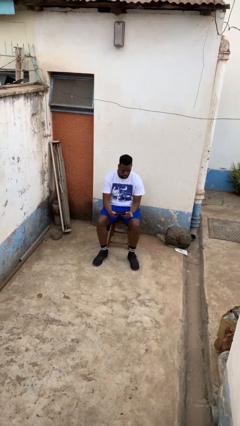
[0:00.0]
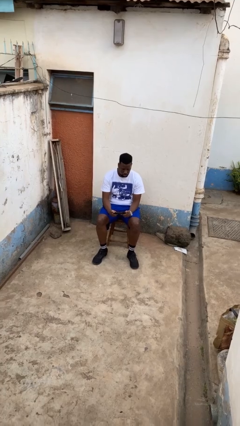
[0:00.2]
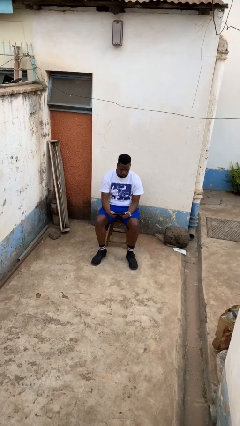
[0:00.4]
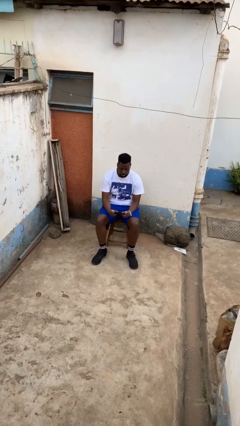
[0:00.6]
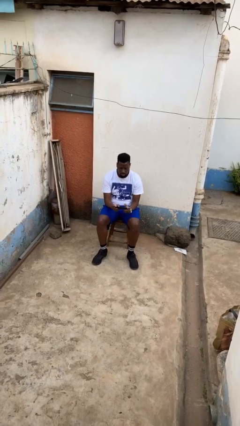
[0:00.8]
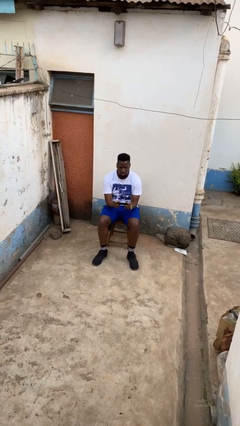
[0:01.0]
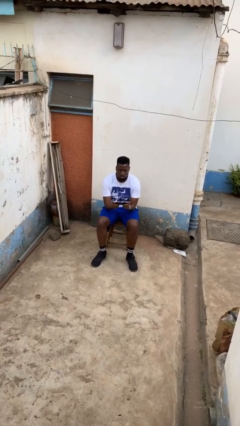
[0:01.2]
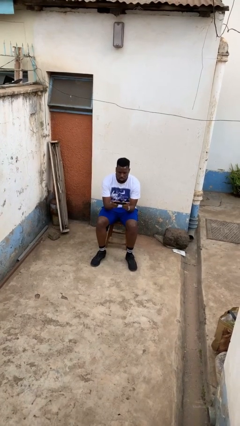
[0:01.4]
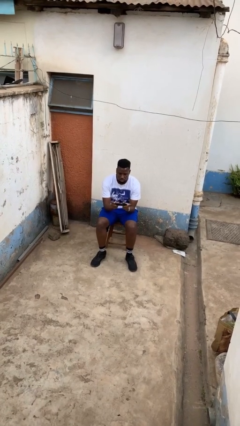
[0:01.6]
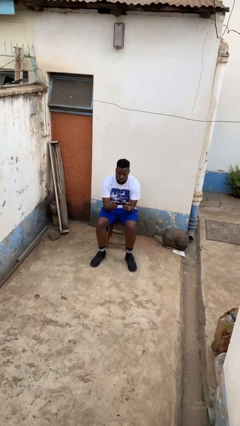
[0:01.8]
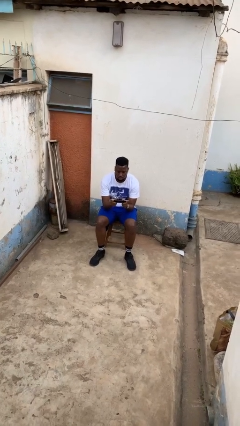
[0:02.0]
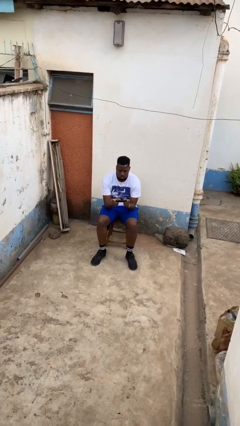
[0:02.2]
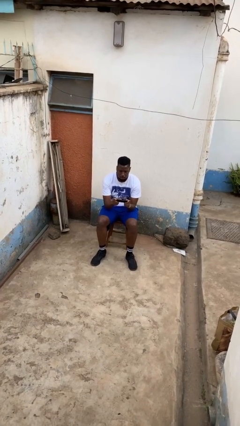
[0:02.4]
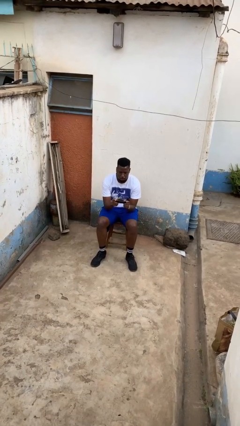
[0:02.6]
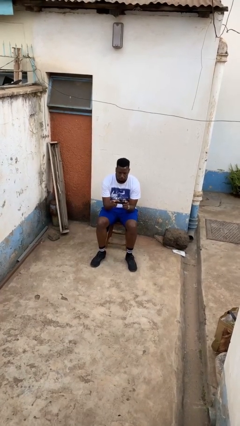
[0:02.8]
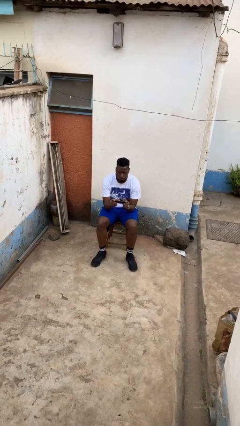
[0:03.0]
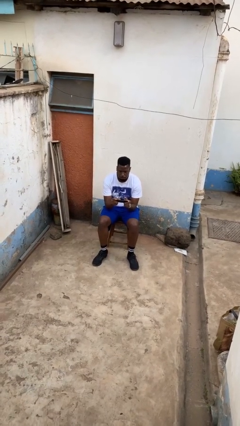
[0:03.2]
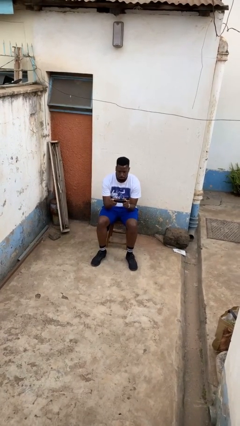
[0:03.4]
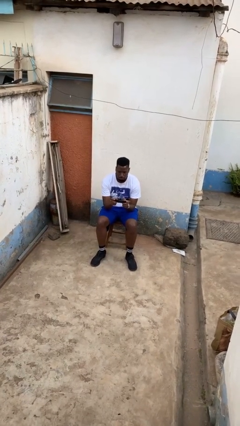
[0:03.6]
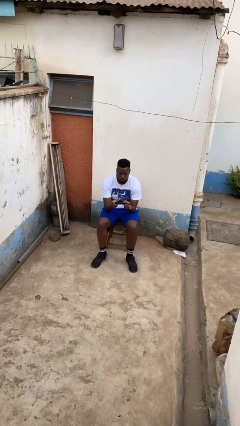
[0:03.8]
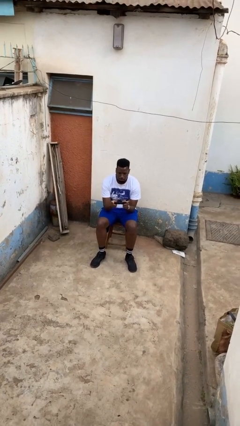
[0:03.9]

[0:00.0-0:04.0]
person interacts with handheld game

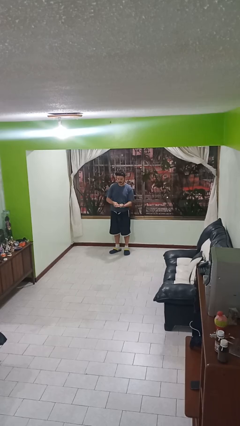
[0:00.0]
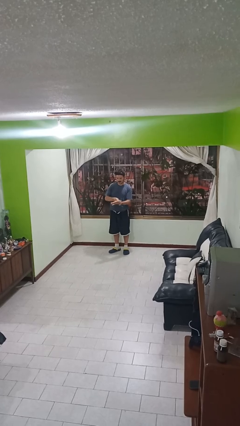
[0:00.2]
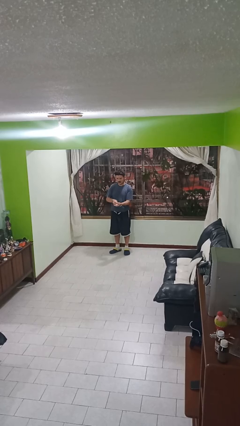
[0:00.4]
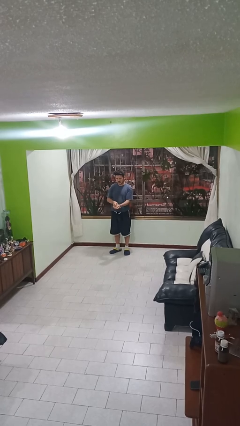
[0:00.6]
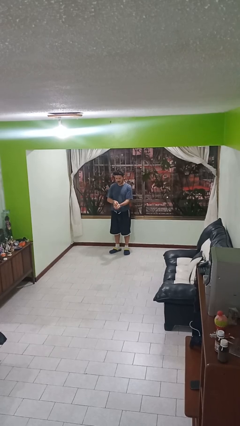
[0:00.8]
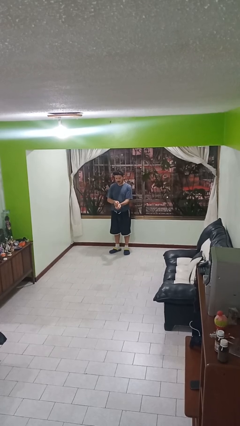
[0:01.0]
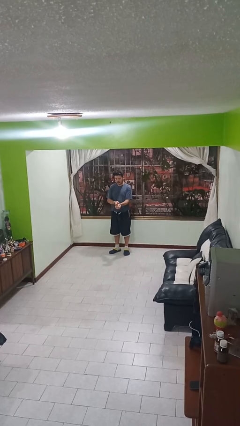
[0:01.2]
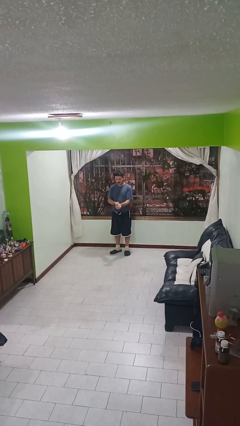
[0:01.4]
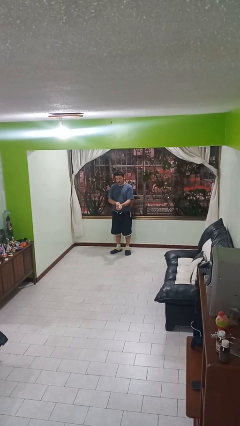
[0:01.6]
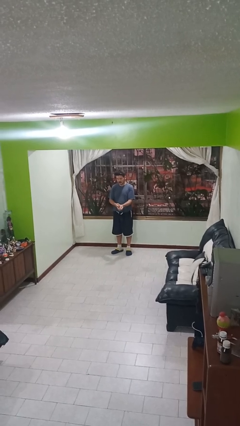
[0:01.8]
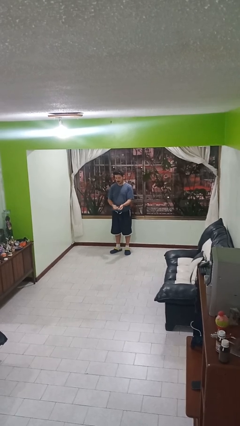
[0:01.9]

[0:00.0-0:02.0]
person puts on wristwatch

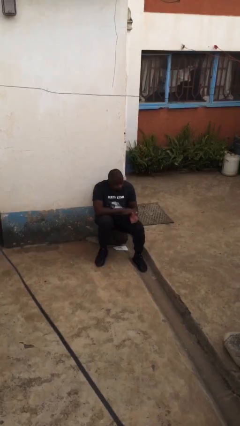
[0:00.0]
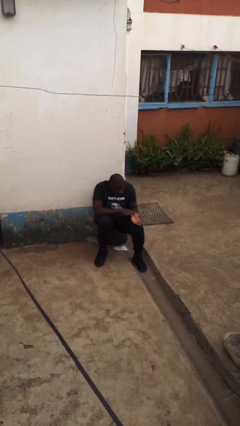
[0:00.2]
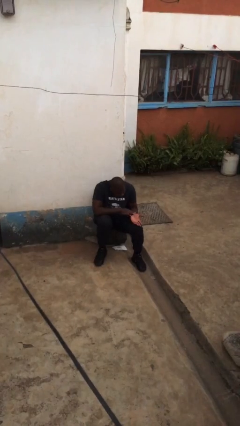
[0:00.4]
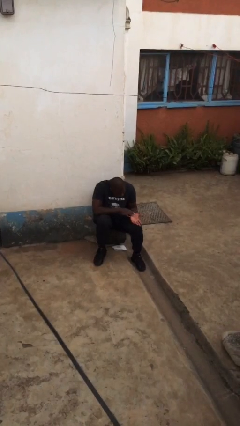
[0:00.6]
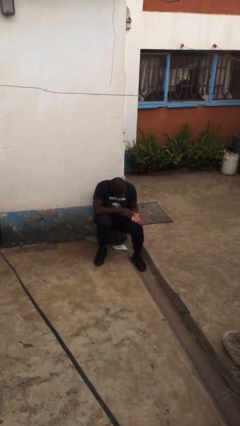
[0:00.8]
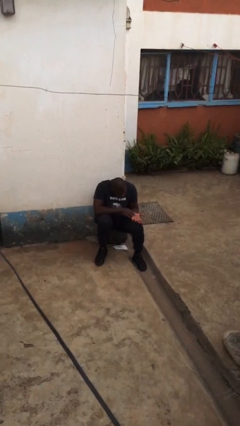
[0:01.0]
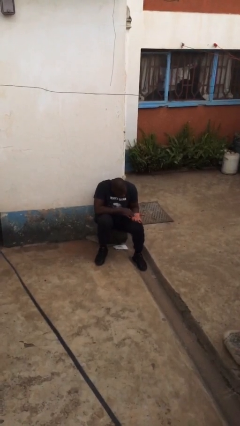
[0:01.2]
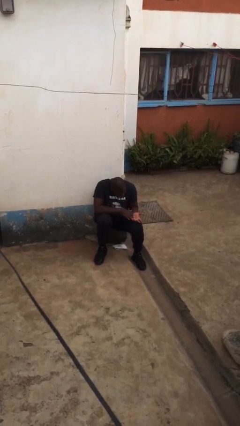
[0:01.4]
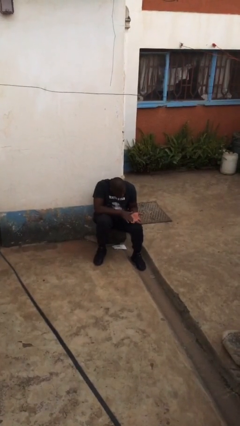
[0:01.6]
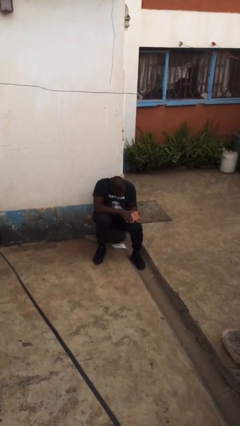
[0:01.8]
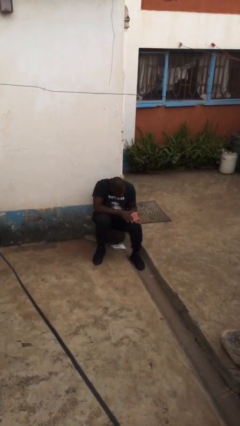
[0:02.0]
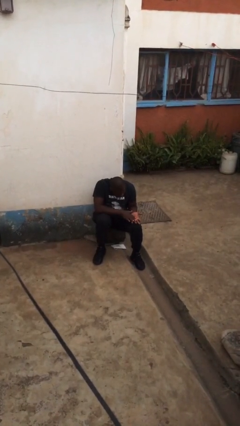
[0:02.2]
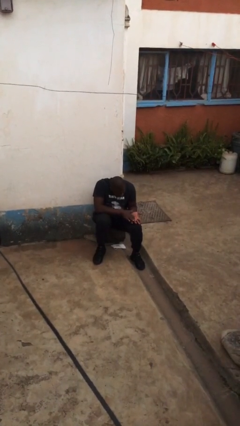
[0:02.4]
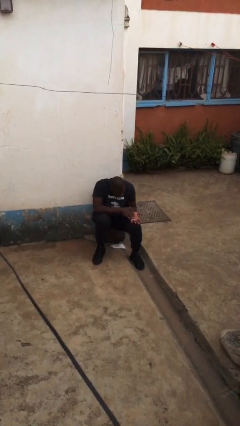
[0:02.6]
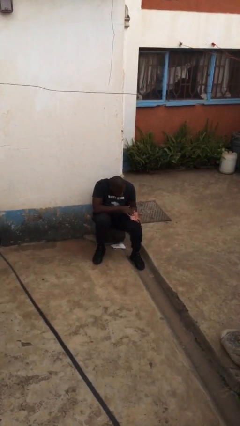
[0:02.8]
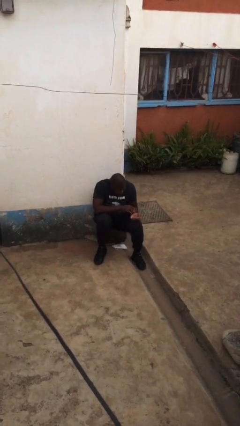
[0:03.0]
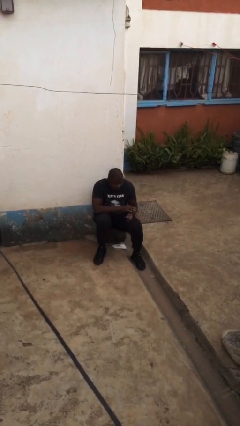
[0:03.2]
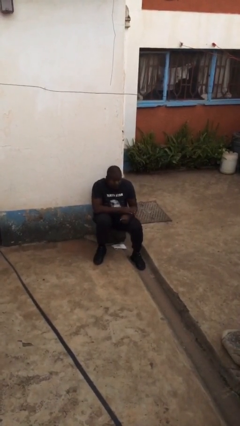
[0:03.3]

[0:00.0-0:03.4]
person looks at hands in lap

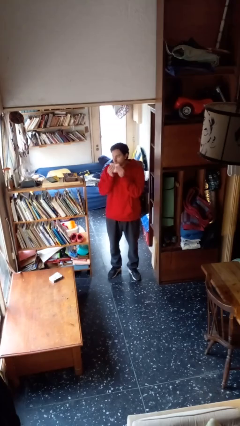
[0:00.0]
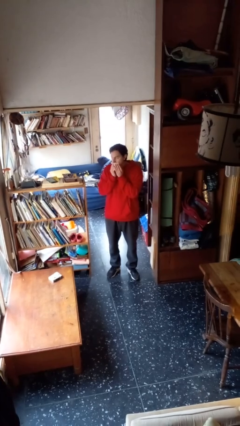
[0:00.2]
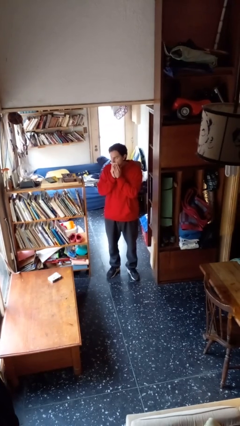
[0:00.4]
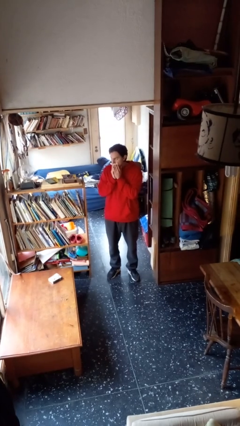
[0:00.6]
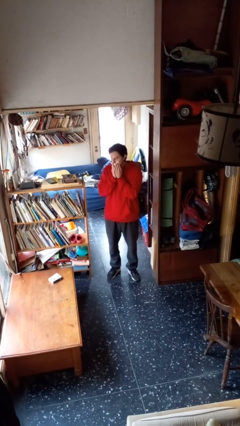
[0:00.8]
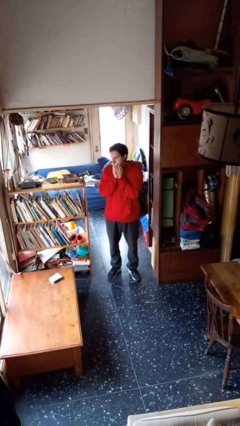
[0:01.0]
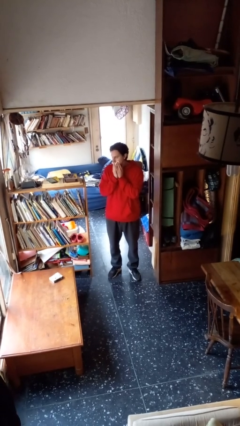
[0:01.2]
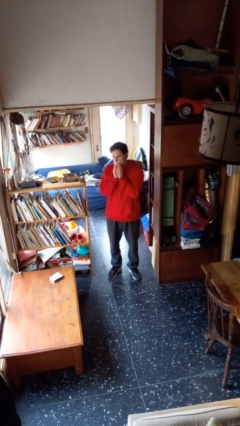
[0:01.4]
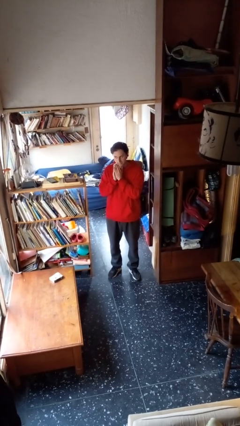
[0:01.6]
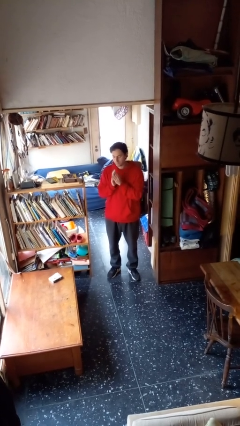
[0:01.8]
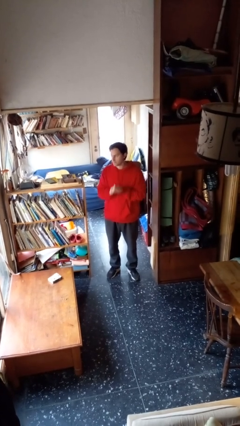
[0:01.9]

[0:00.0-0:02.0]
person wipes mouth with napkin

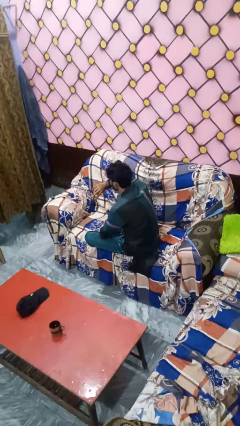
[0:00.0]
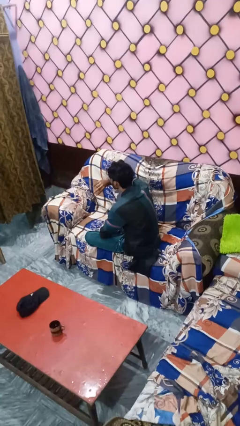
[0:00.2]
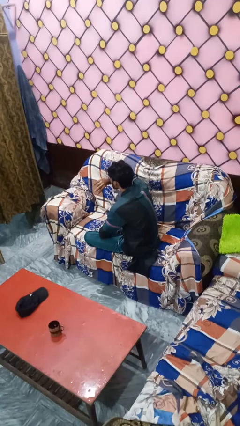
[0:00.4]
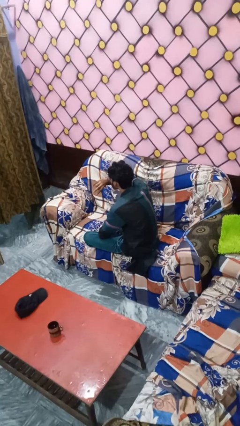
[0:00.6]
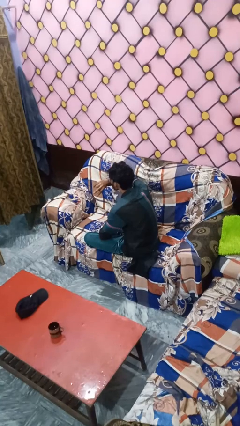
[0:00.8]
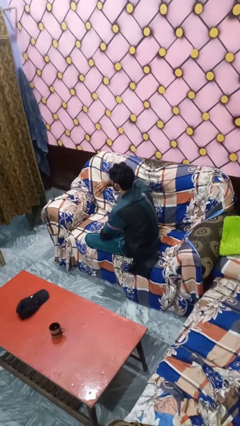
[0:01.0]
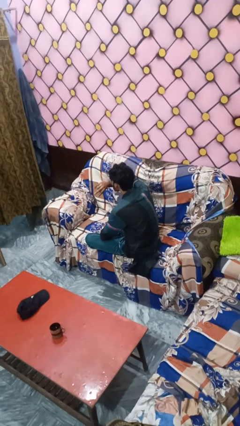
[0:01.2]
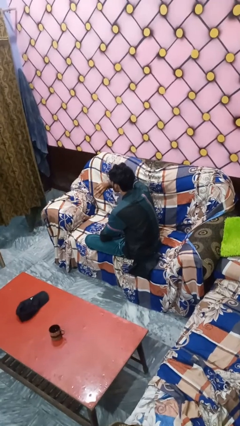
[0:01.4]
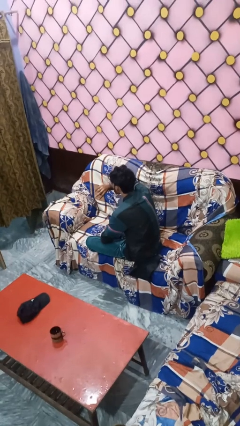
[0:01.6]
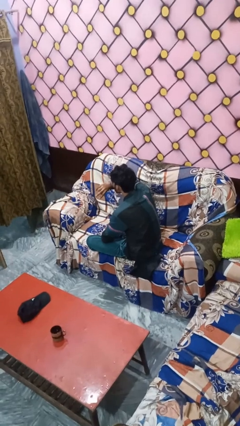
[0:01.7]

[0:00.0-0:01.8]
person gestures watch closely

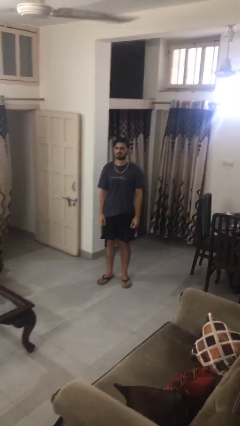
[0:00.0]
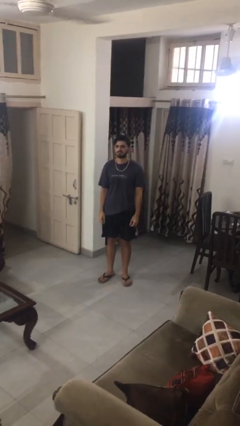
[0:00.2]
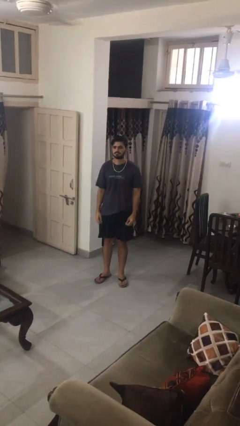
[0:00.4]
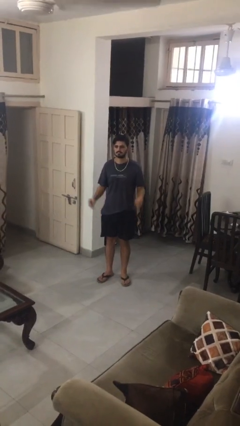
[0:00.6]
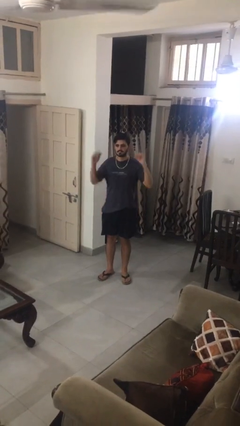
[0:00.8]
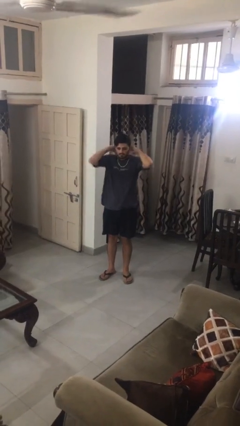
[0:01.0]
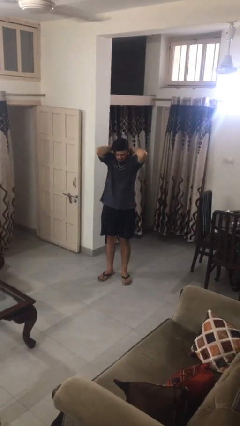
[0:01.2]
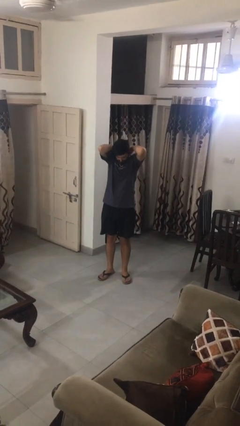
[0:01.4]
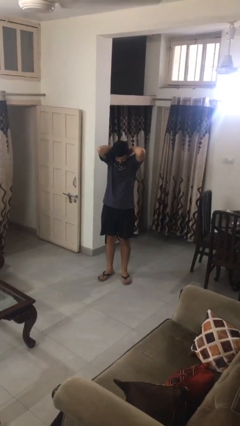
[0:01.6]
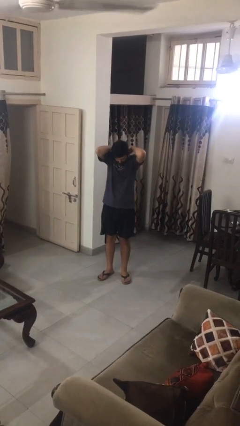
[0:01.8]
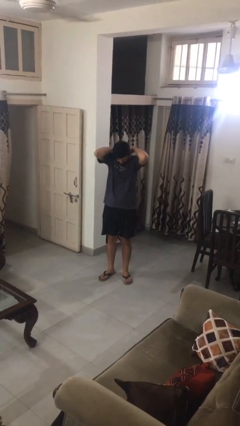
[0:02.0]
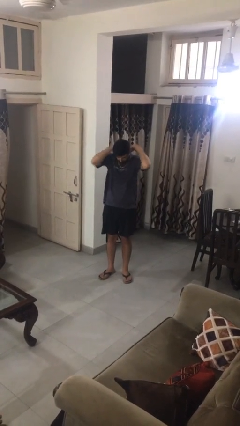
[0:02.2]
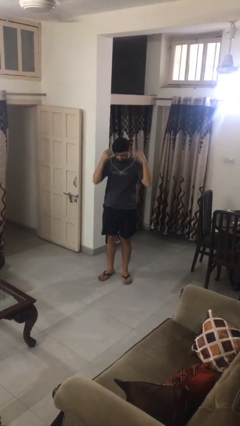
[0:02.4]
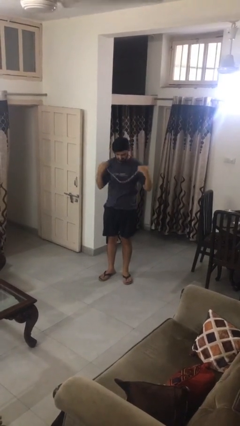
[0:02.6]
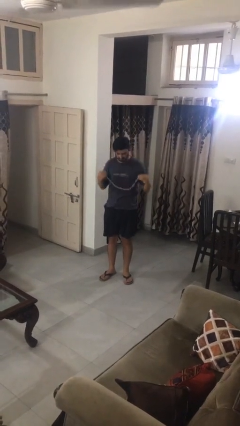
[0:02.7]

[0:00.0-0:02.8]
person takes off necklace

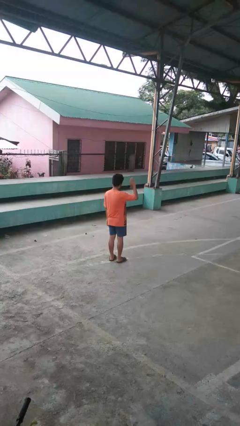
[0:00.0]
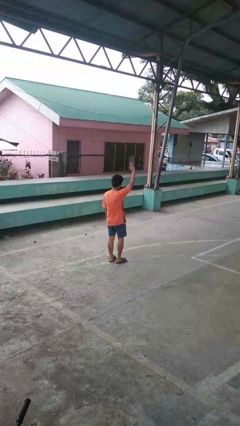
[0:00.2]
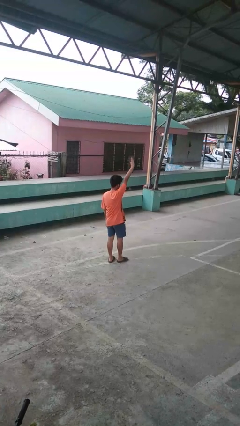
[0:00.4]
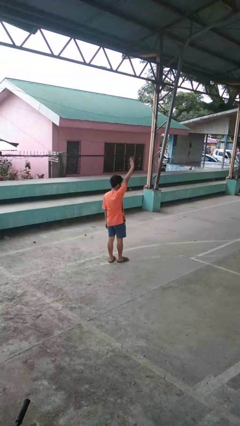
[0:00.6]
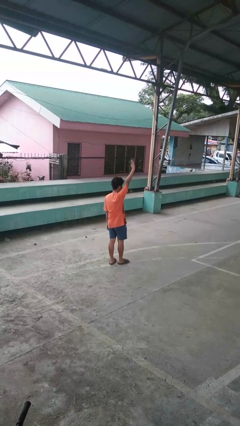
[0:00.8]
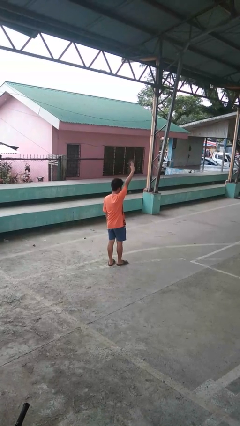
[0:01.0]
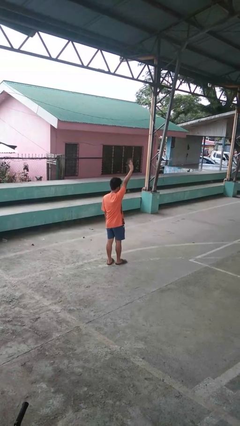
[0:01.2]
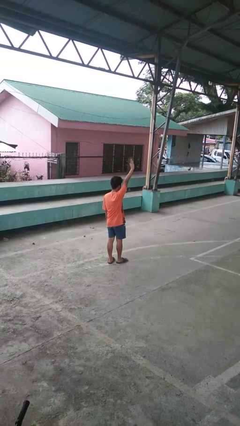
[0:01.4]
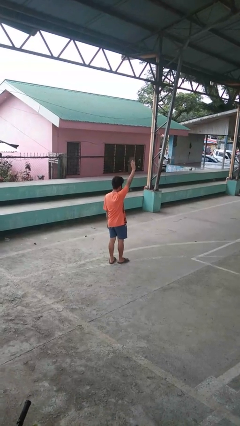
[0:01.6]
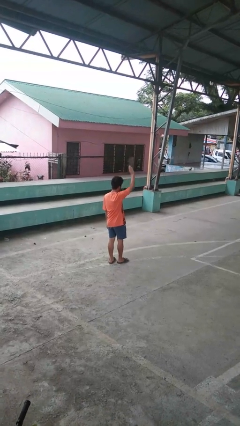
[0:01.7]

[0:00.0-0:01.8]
person gestures raise hand
